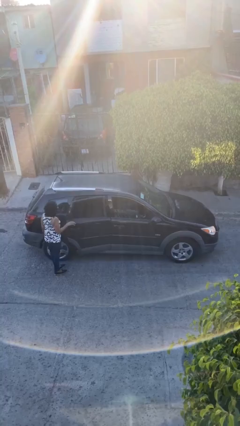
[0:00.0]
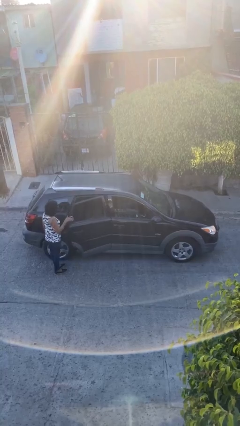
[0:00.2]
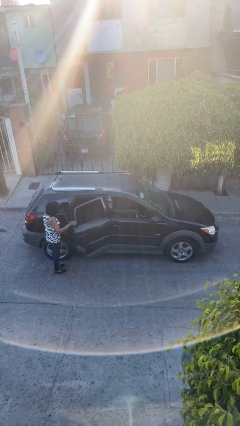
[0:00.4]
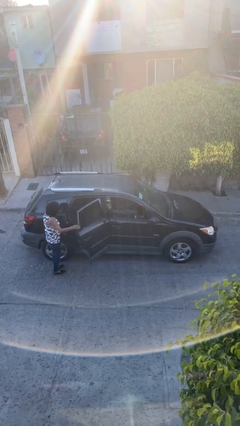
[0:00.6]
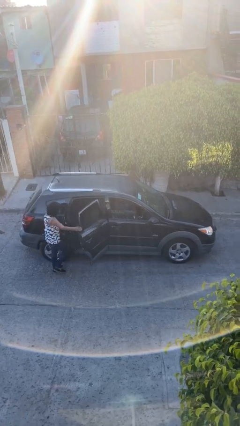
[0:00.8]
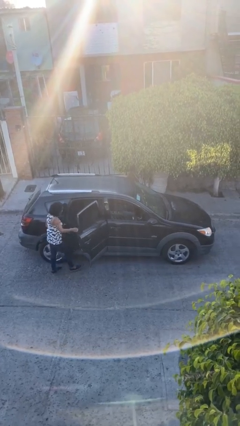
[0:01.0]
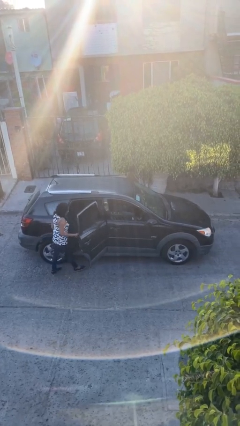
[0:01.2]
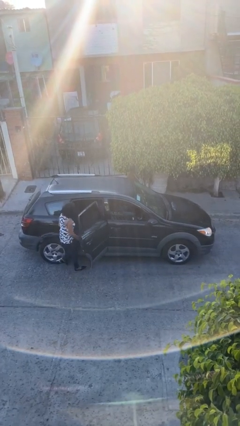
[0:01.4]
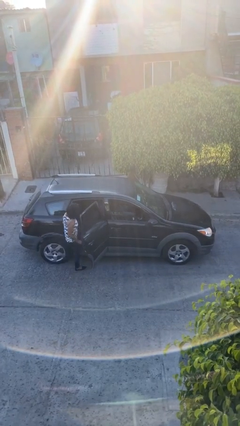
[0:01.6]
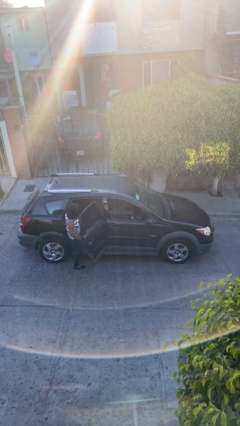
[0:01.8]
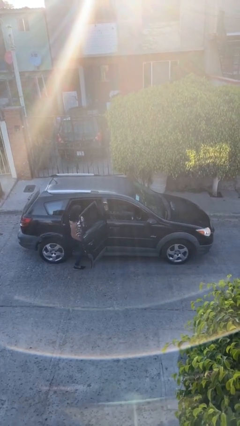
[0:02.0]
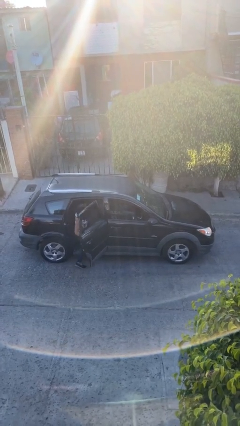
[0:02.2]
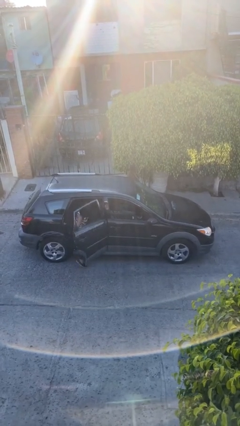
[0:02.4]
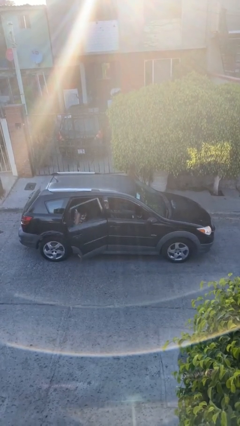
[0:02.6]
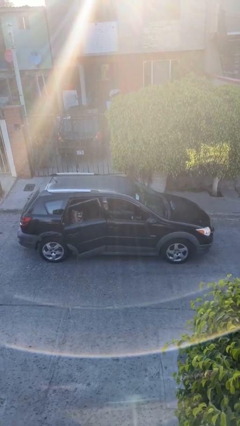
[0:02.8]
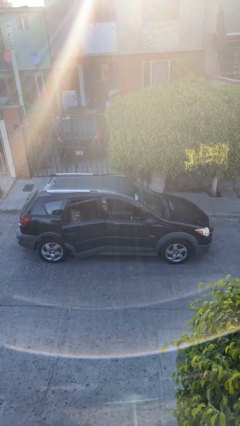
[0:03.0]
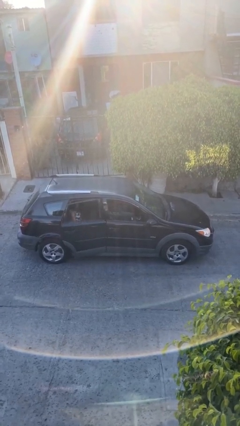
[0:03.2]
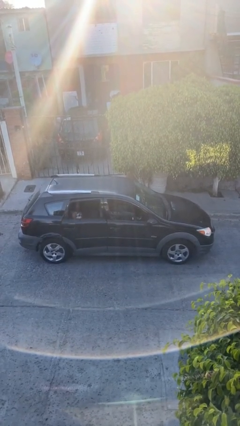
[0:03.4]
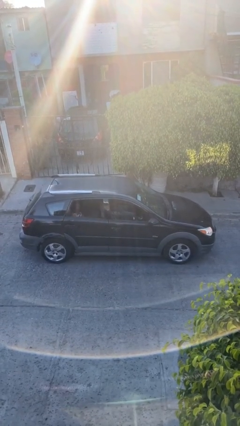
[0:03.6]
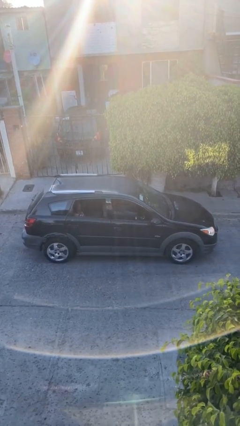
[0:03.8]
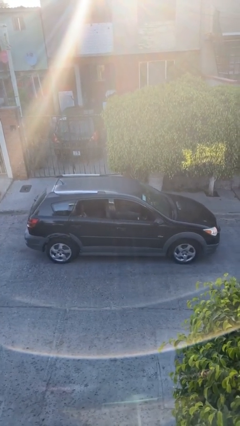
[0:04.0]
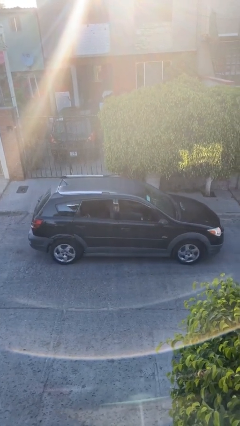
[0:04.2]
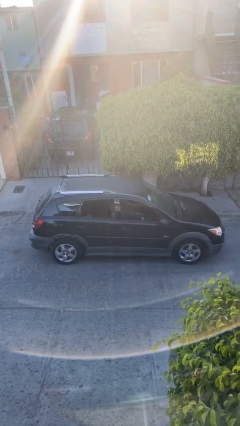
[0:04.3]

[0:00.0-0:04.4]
car picks up person

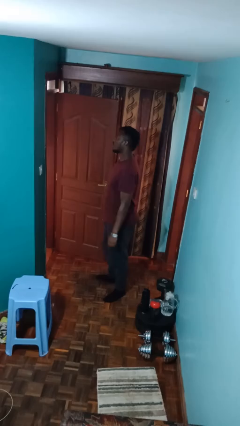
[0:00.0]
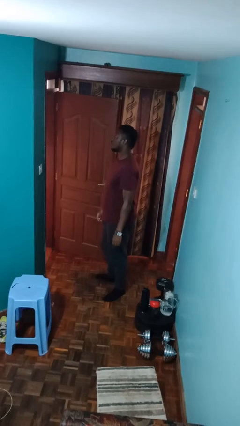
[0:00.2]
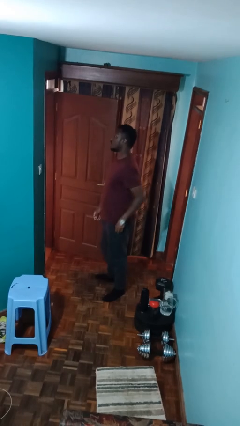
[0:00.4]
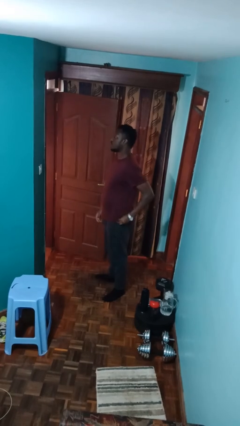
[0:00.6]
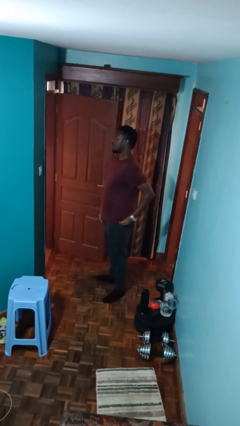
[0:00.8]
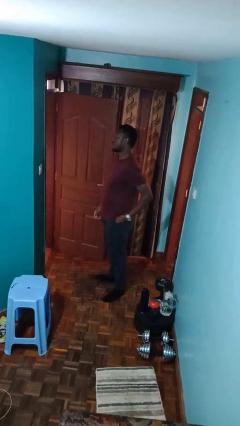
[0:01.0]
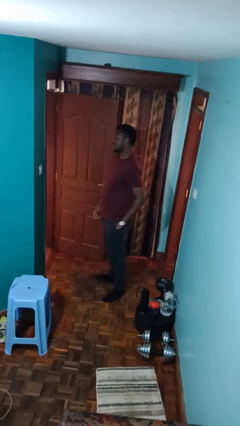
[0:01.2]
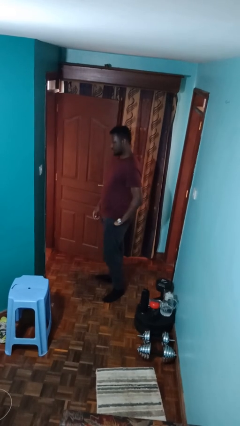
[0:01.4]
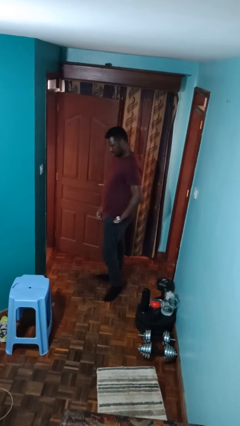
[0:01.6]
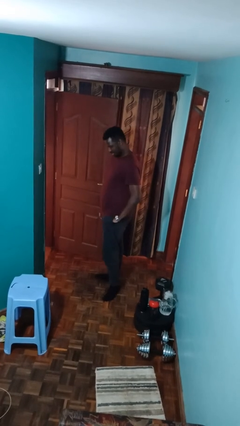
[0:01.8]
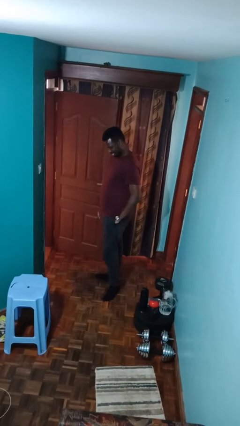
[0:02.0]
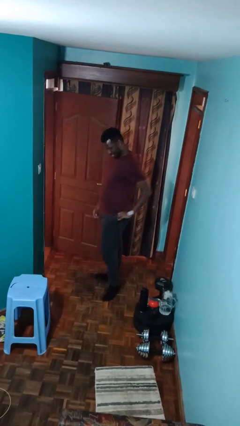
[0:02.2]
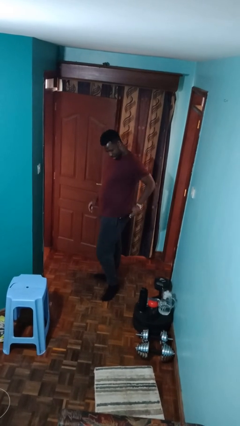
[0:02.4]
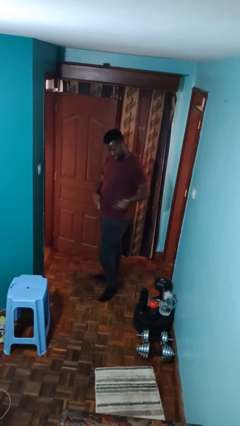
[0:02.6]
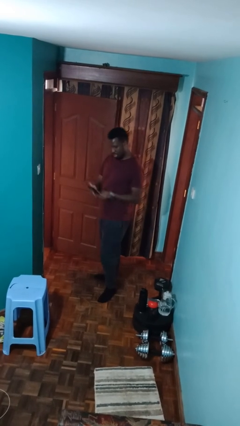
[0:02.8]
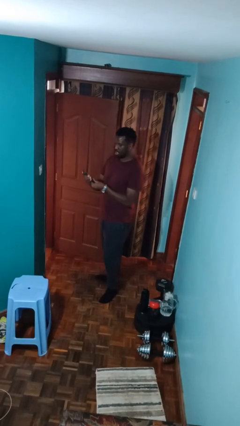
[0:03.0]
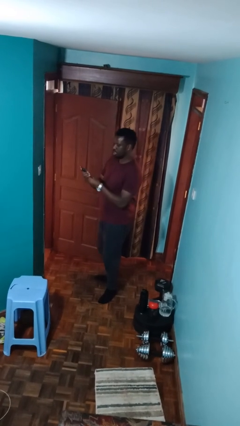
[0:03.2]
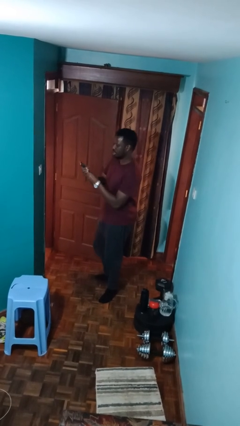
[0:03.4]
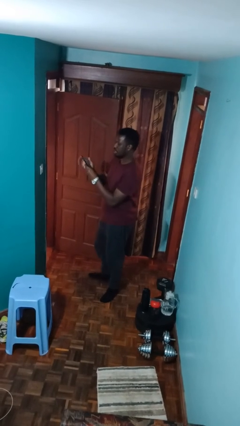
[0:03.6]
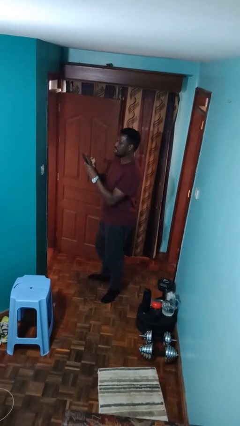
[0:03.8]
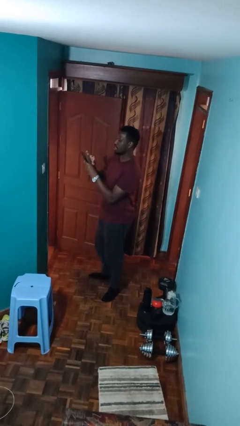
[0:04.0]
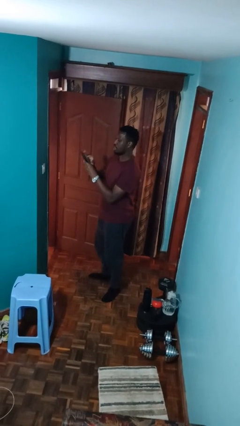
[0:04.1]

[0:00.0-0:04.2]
person takes phone from pocket

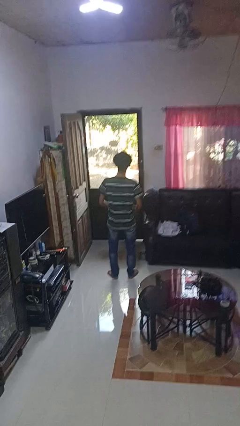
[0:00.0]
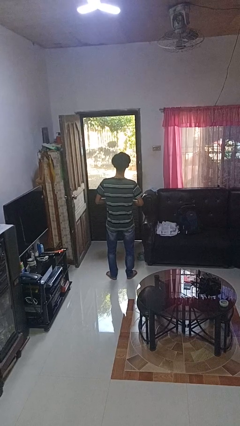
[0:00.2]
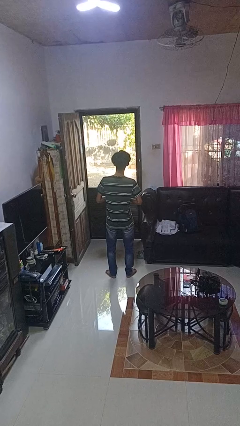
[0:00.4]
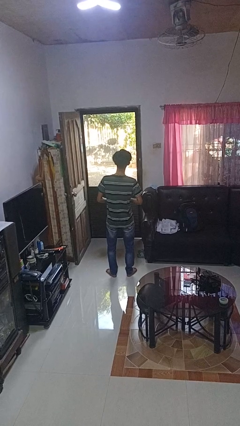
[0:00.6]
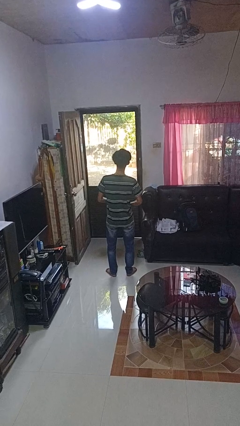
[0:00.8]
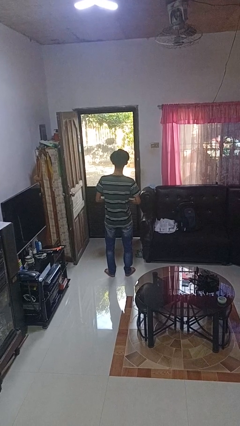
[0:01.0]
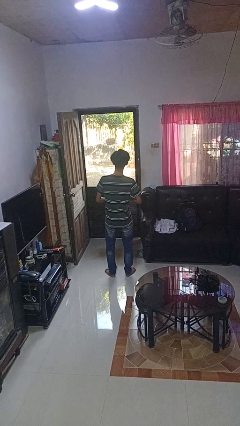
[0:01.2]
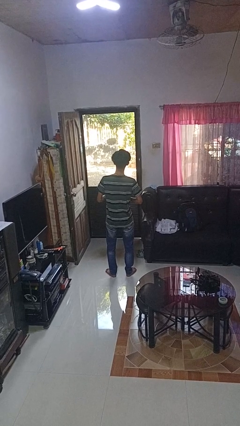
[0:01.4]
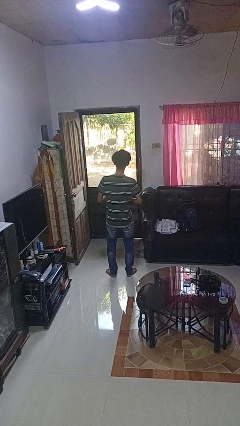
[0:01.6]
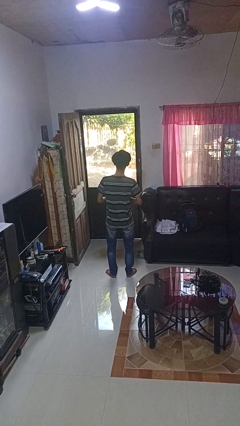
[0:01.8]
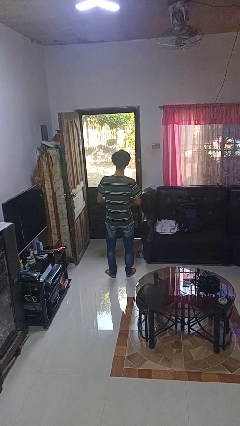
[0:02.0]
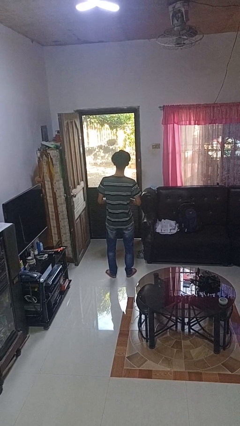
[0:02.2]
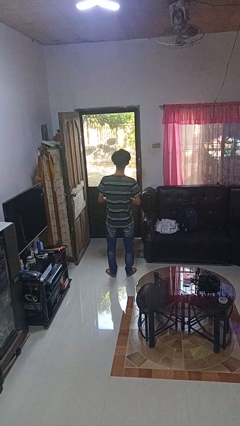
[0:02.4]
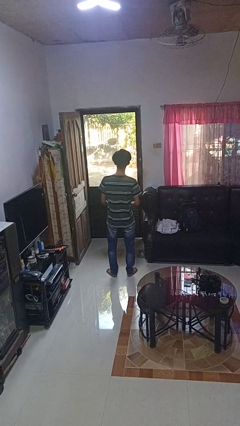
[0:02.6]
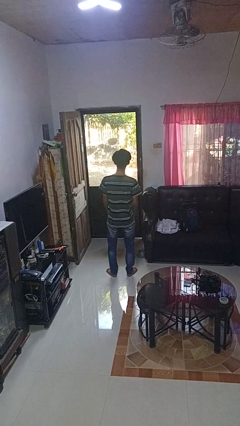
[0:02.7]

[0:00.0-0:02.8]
person unbuttons shirt

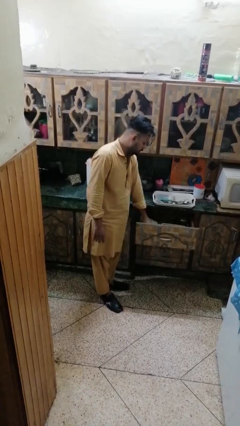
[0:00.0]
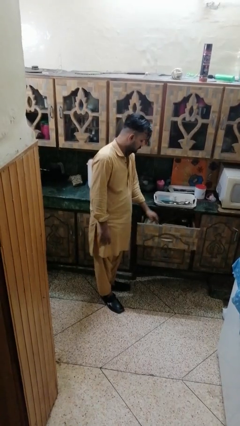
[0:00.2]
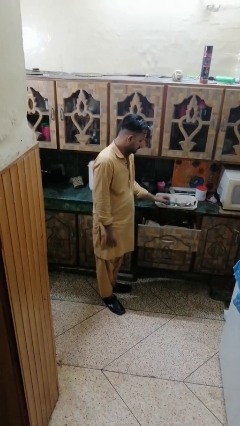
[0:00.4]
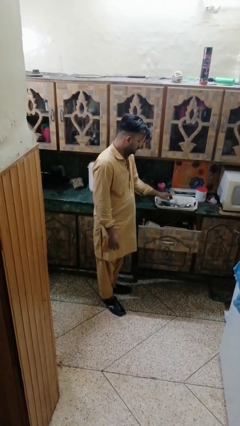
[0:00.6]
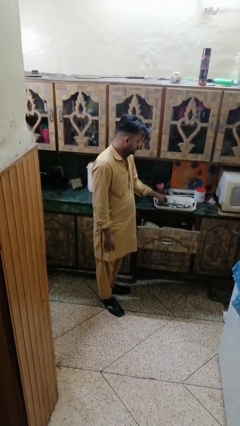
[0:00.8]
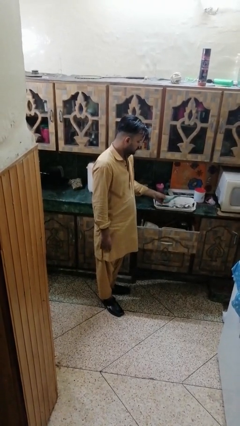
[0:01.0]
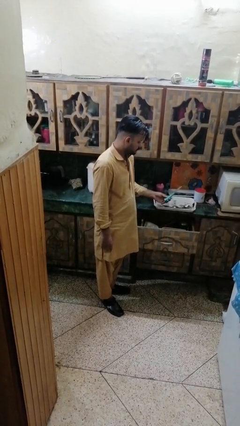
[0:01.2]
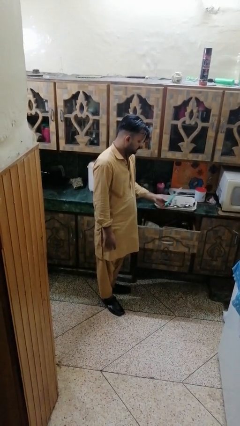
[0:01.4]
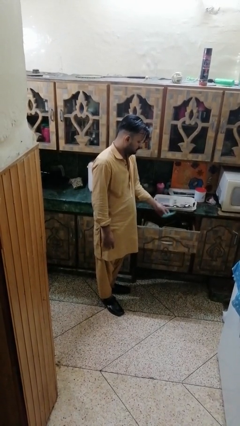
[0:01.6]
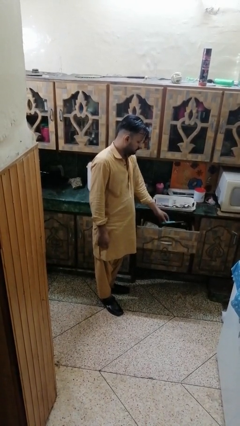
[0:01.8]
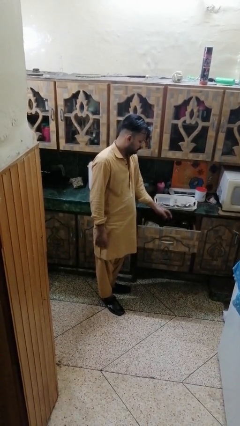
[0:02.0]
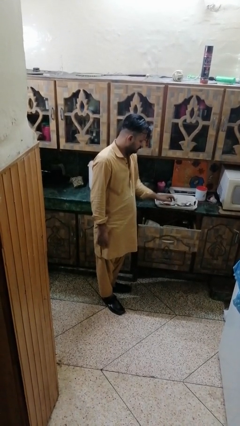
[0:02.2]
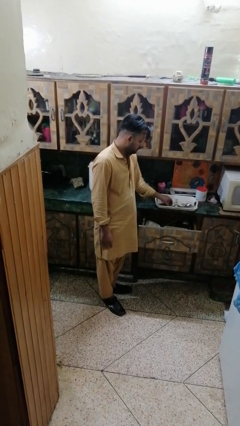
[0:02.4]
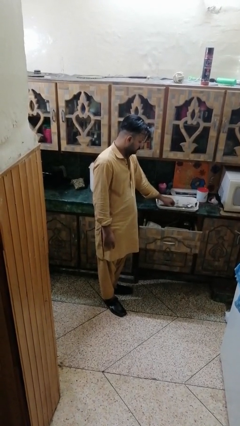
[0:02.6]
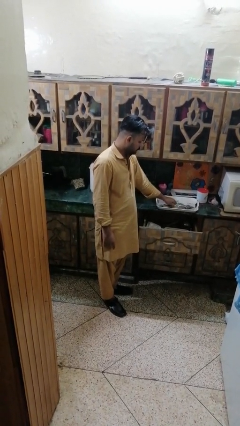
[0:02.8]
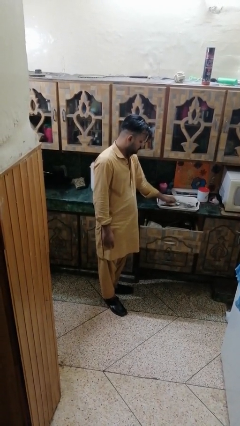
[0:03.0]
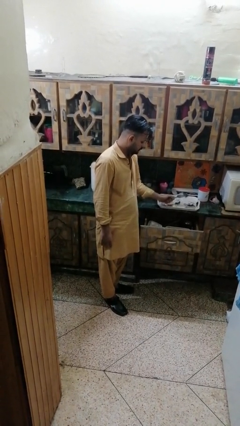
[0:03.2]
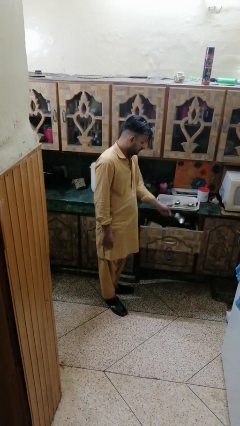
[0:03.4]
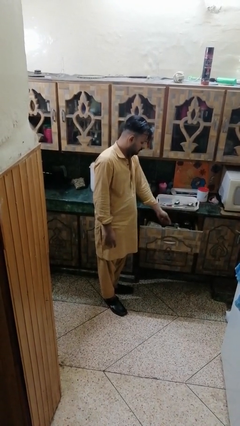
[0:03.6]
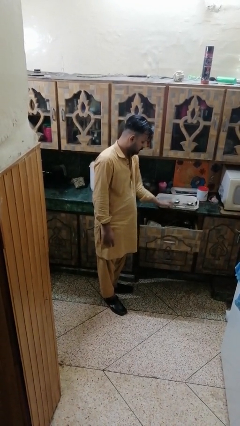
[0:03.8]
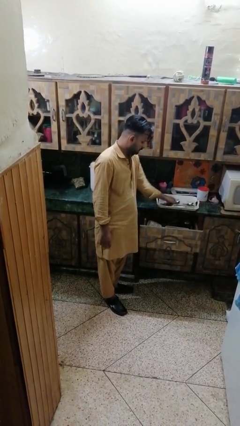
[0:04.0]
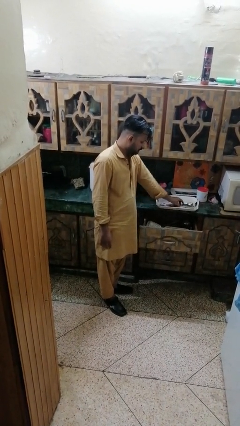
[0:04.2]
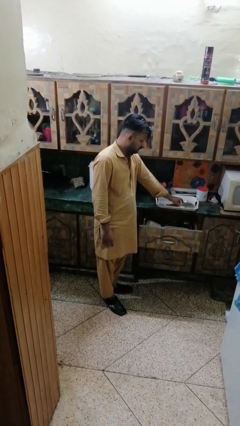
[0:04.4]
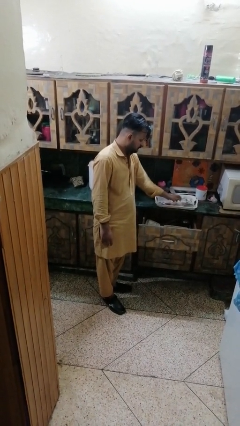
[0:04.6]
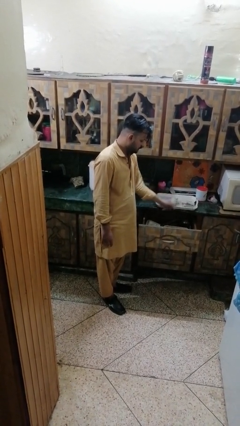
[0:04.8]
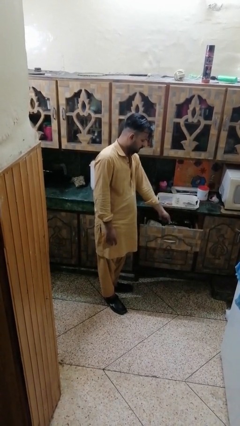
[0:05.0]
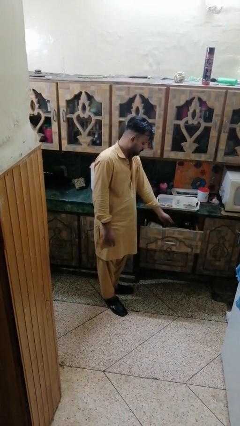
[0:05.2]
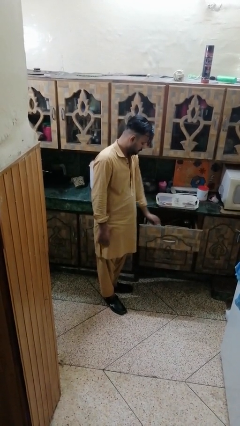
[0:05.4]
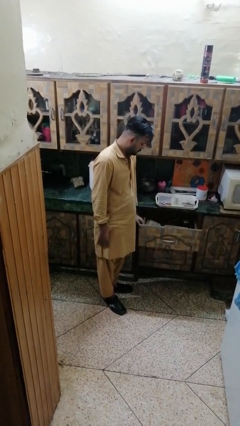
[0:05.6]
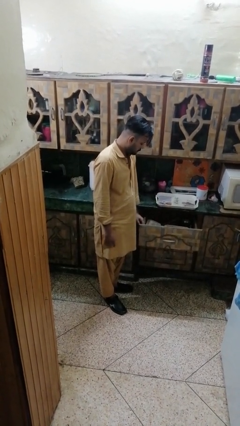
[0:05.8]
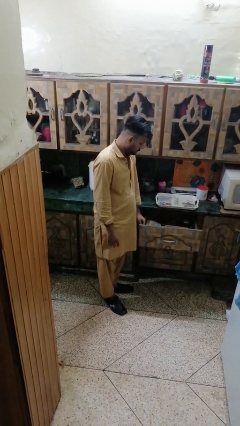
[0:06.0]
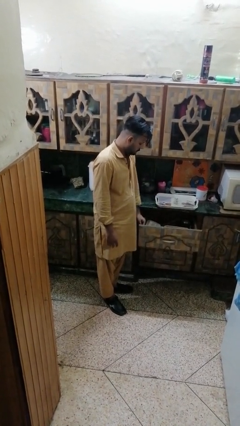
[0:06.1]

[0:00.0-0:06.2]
person puts object into kitchen drawer
